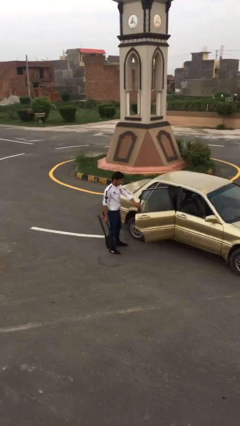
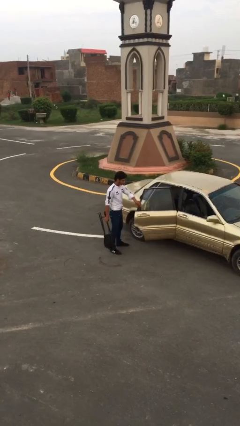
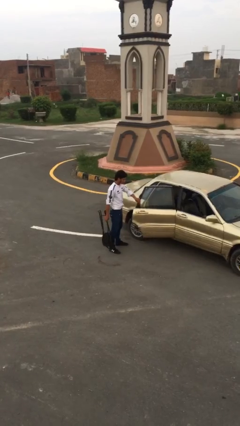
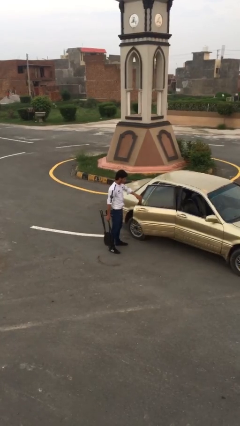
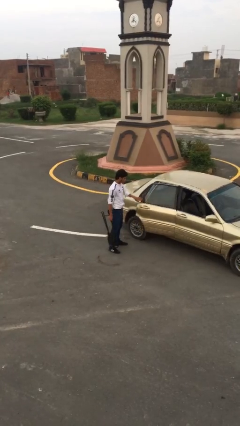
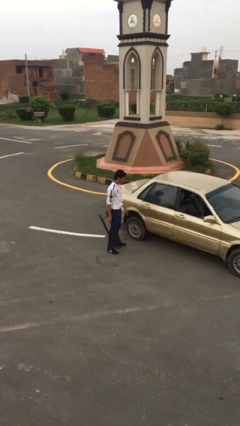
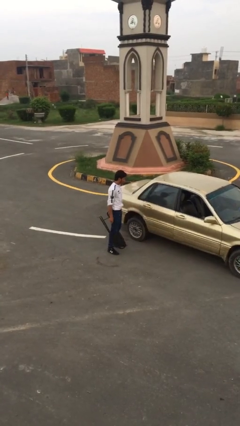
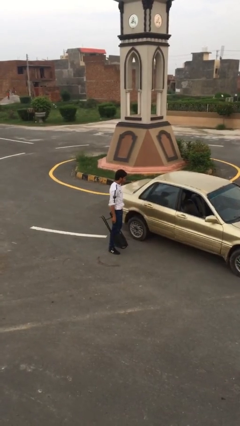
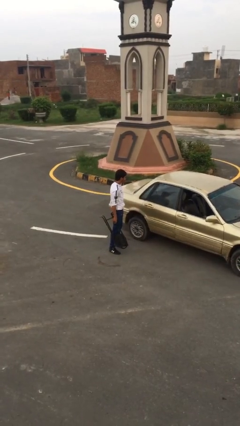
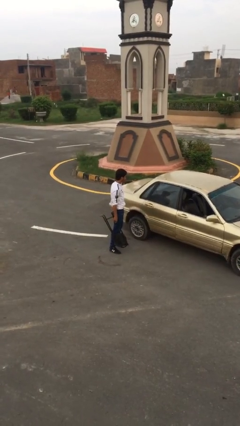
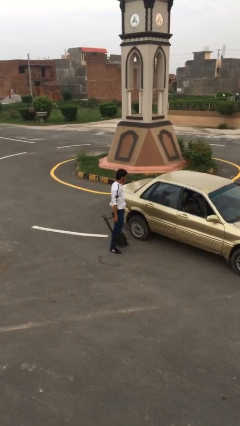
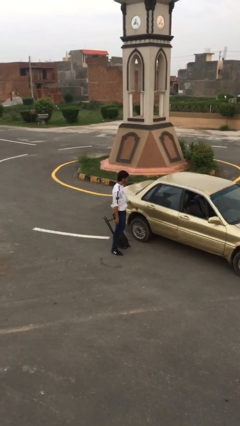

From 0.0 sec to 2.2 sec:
person closes car door

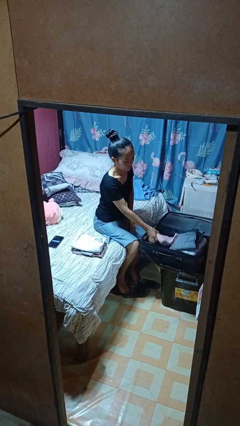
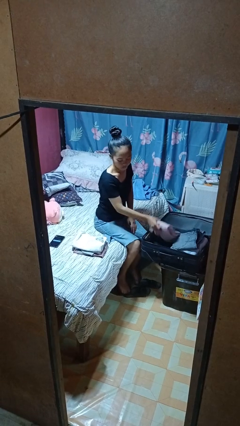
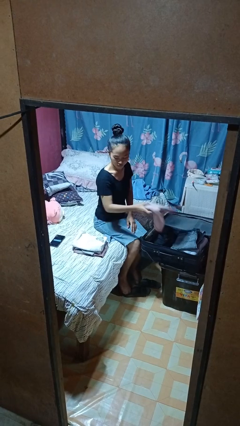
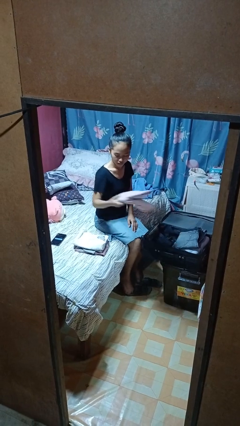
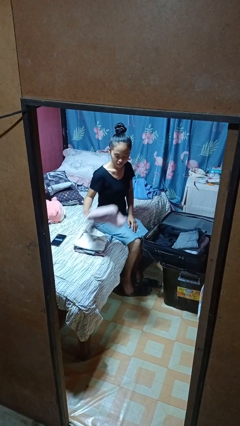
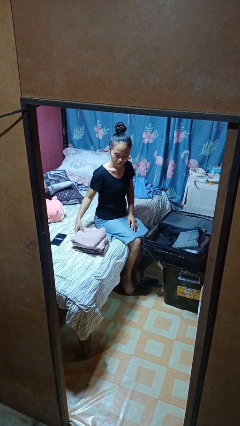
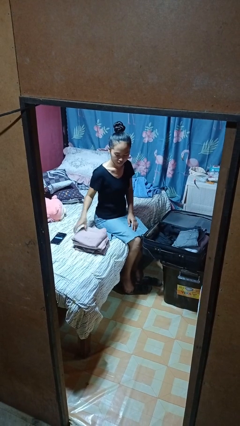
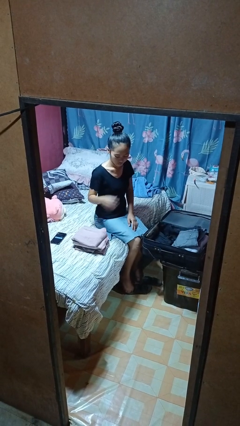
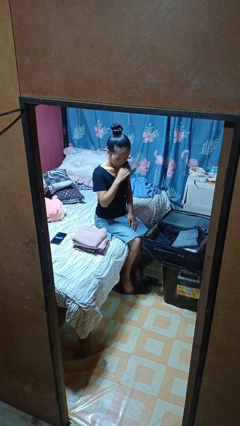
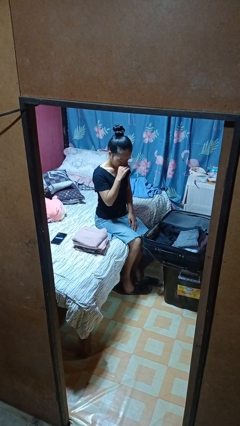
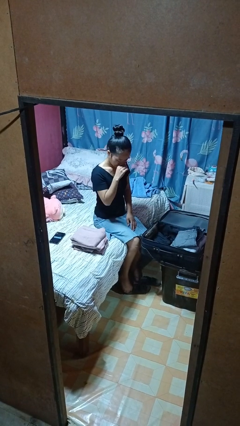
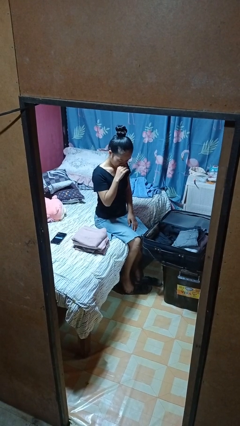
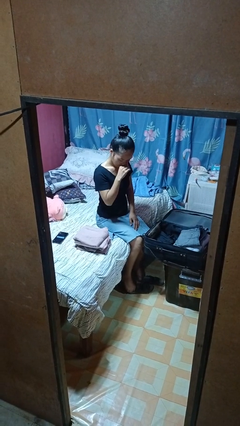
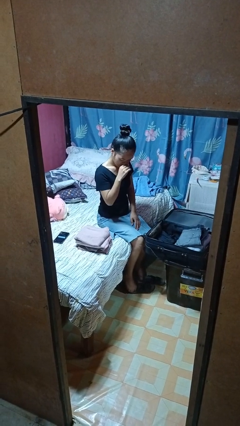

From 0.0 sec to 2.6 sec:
person unloads clothes from suitcase

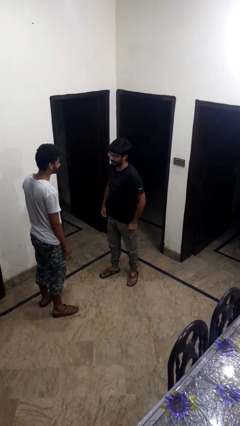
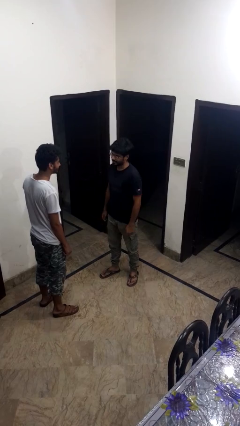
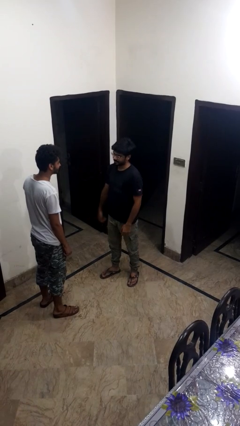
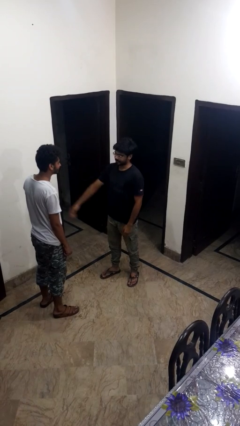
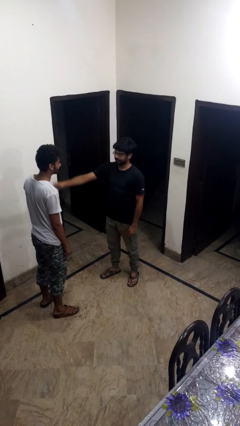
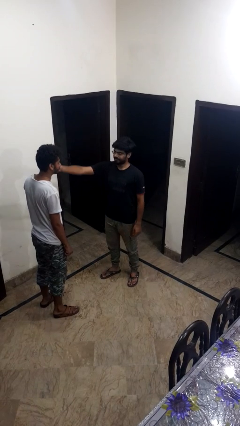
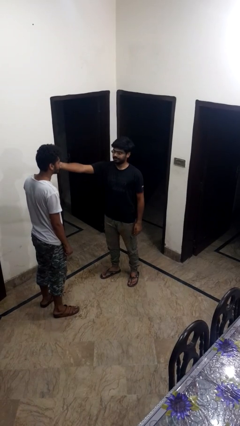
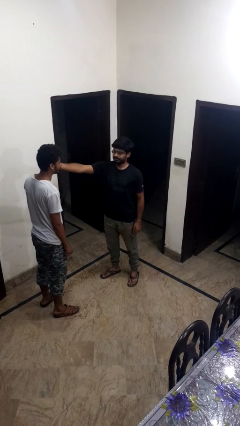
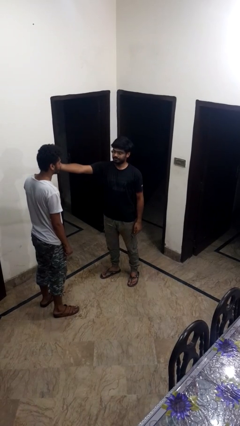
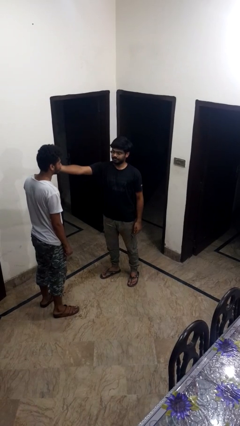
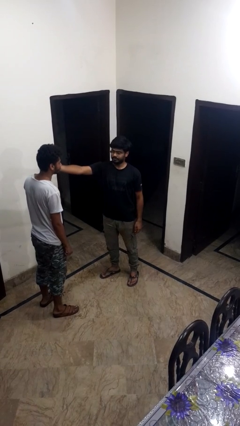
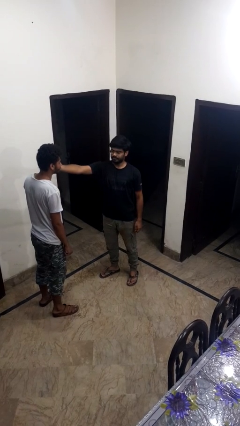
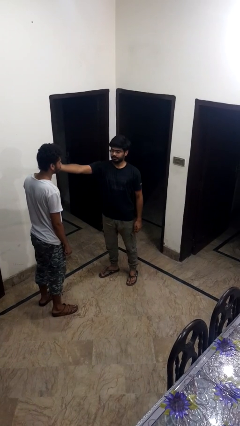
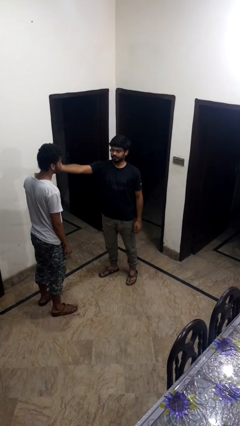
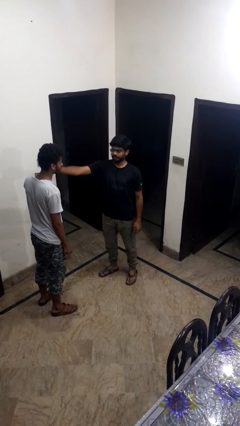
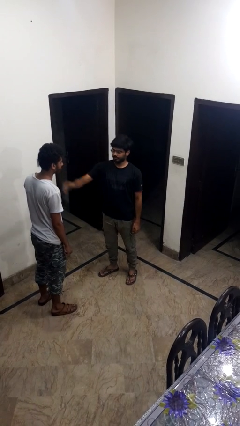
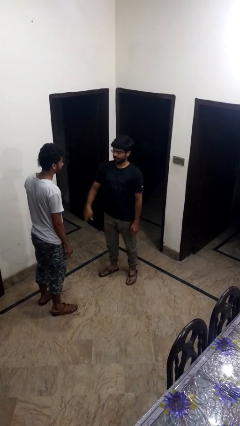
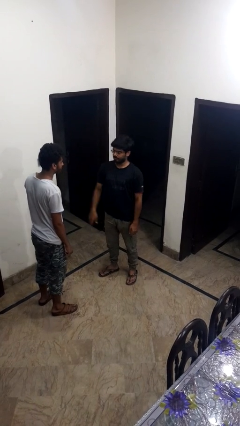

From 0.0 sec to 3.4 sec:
person touches face of person

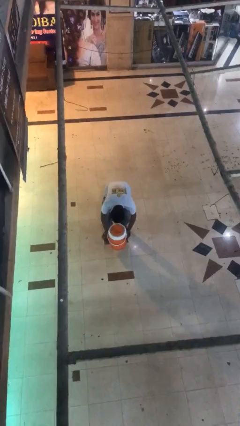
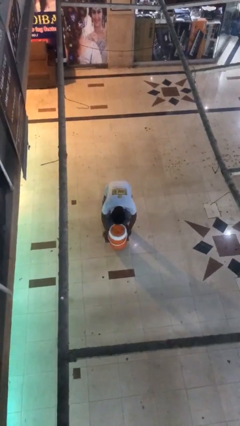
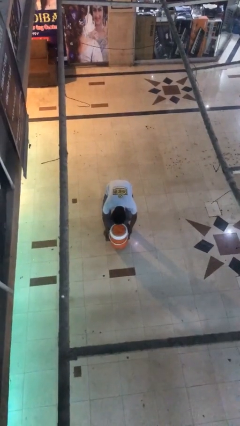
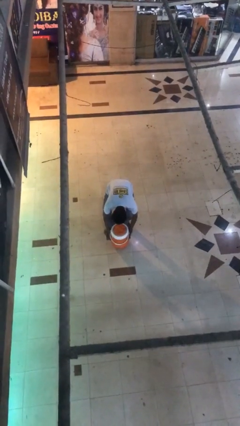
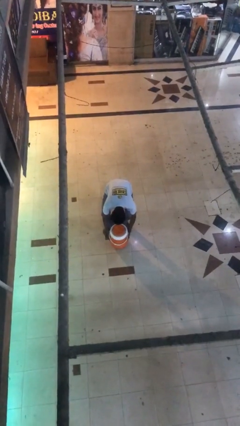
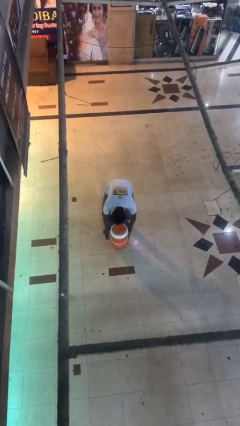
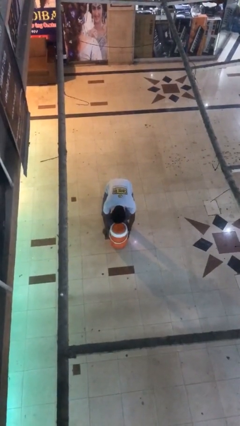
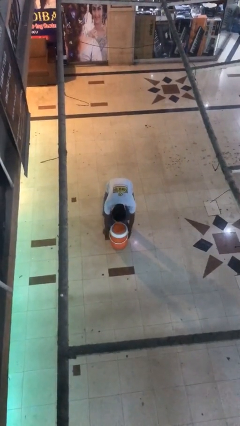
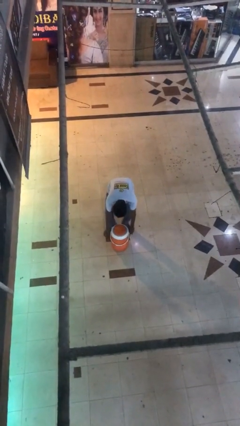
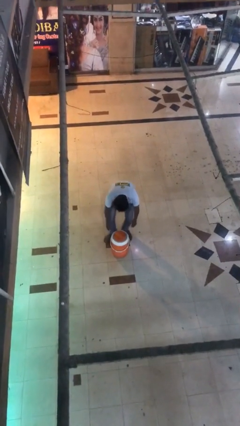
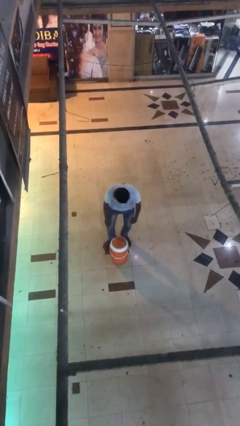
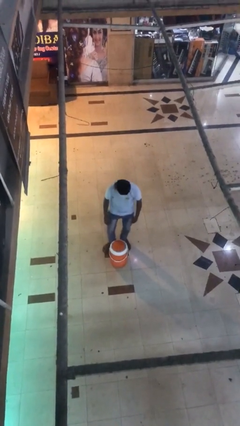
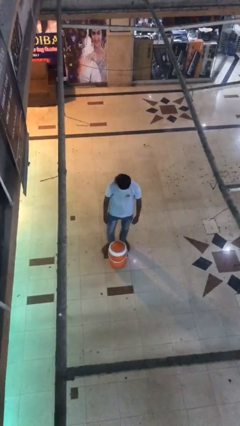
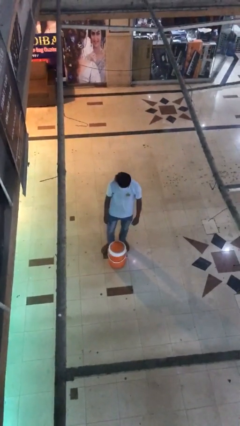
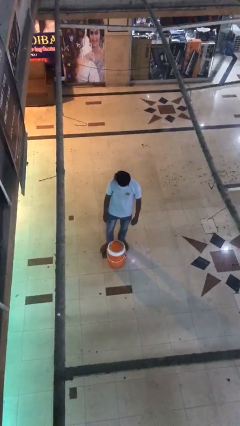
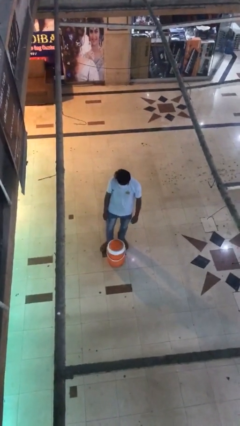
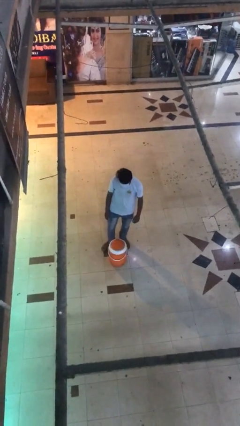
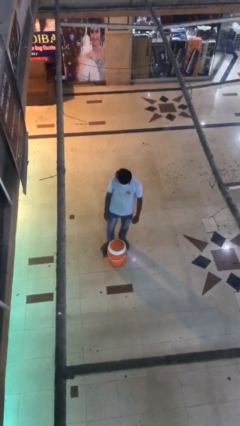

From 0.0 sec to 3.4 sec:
person puts down object on floor

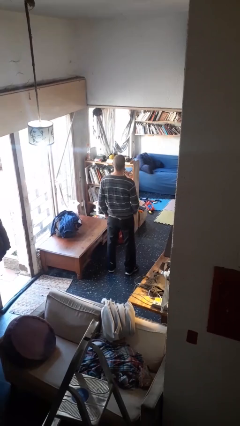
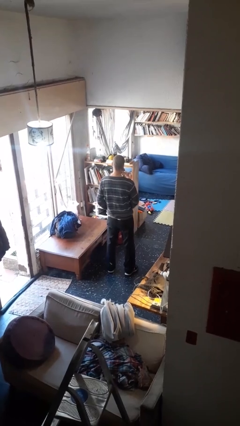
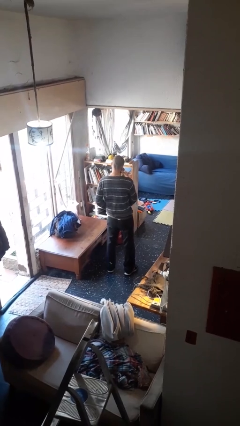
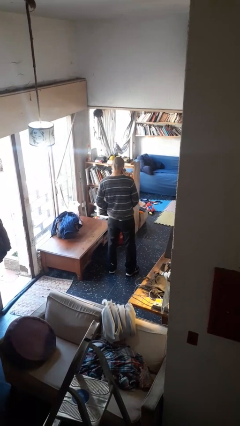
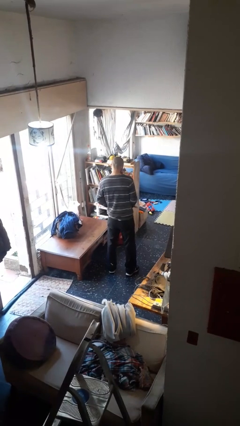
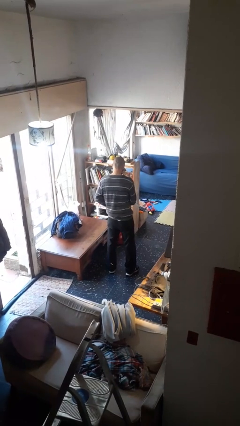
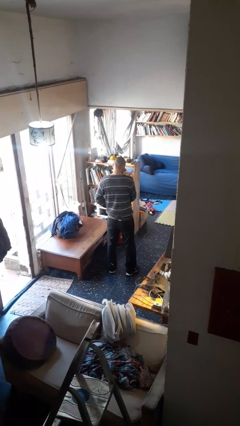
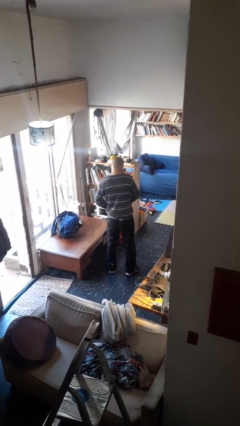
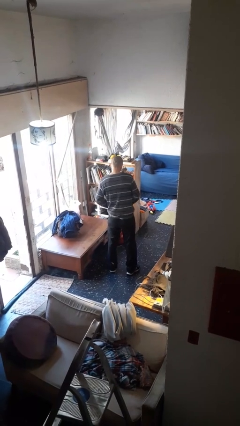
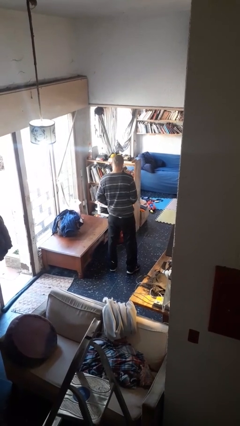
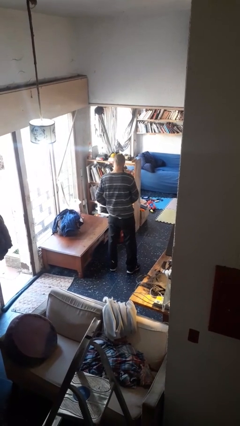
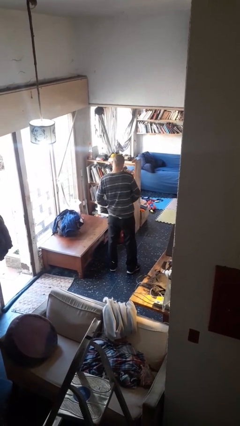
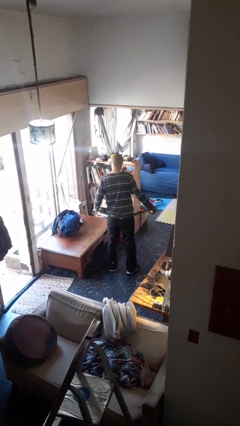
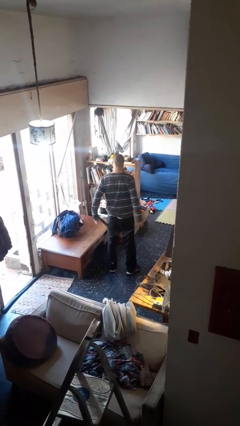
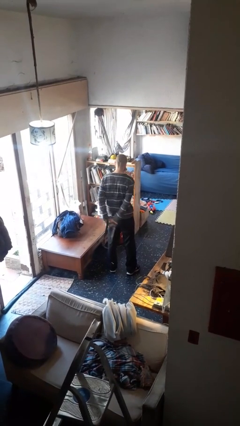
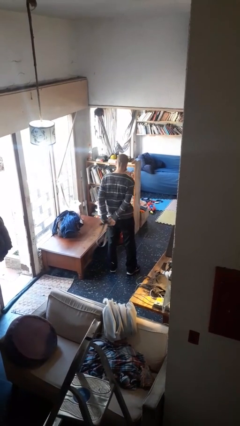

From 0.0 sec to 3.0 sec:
person takes off belt

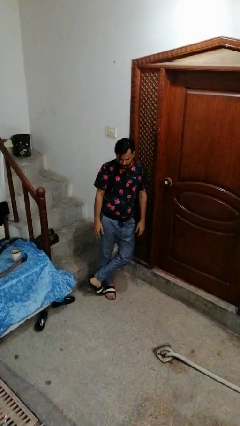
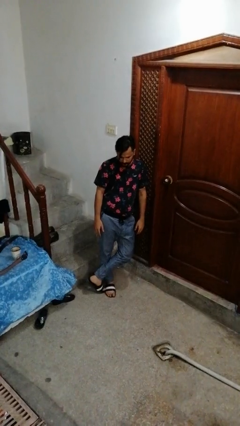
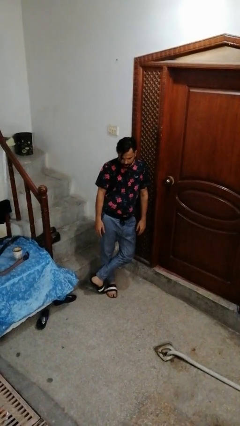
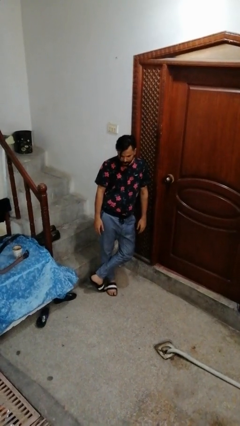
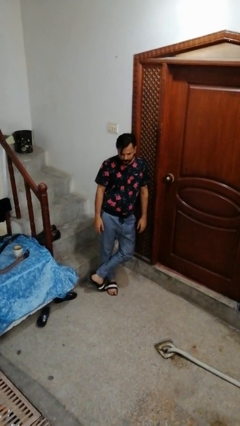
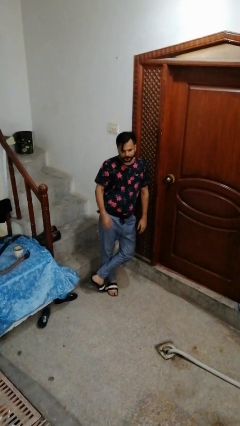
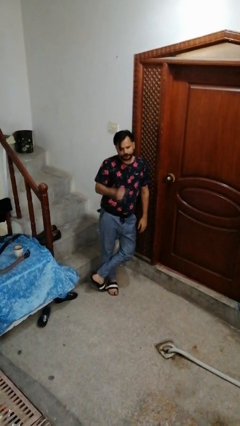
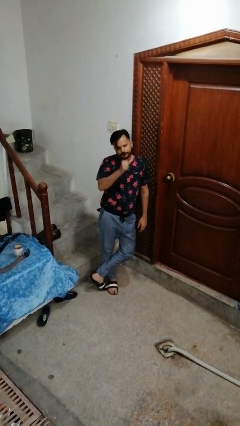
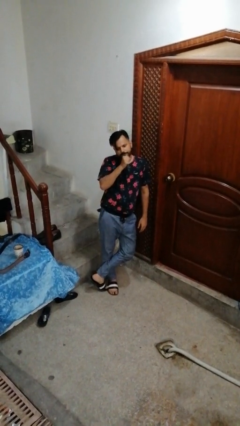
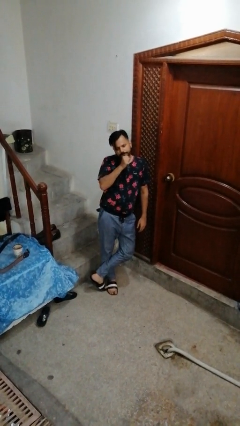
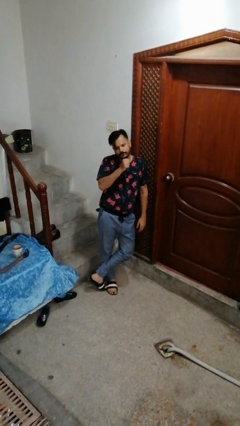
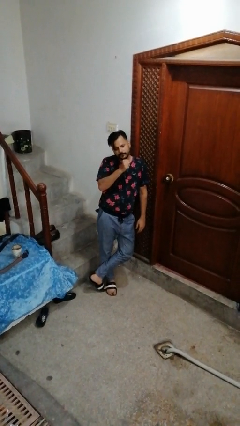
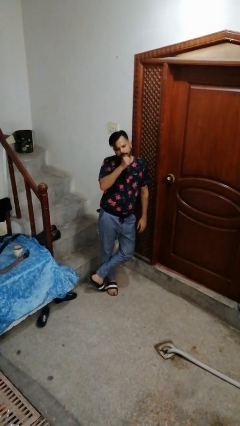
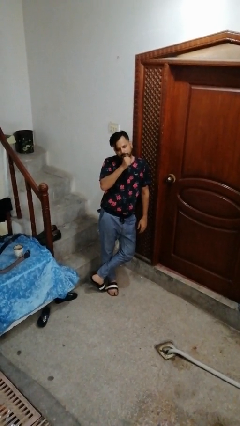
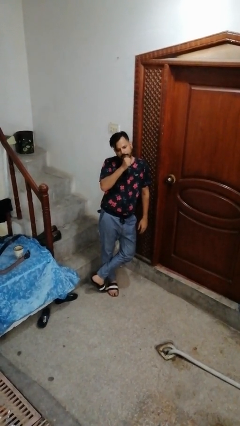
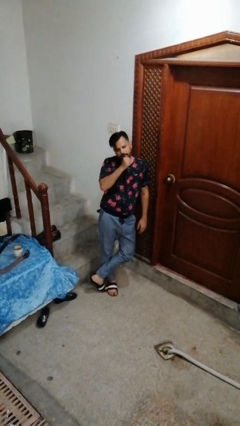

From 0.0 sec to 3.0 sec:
person strokes chin
